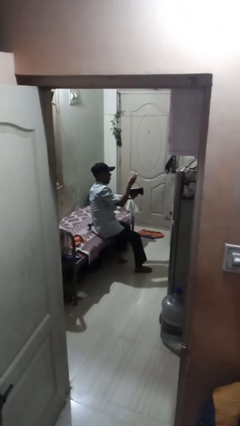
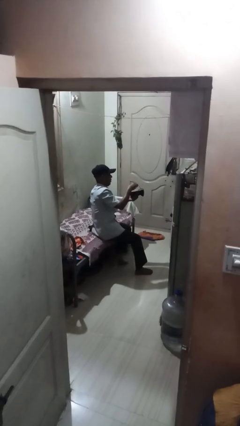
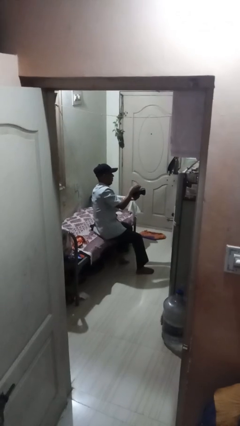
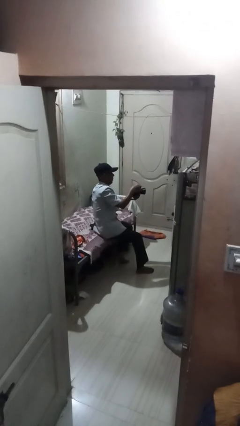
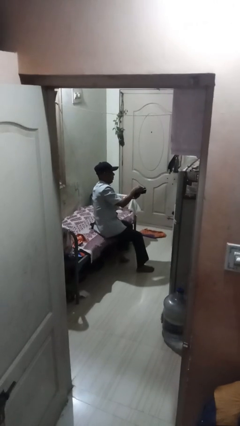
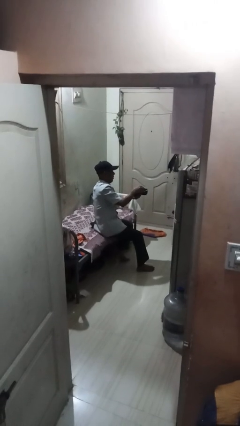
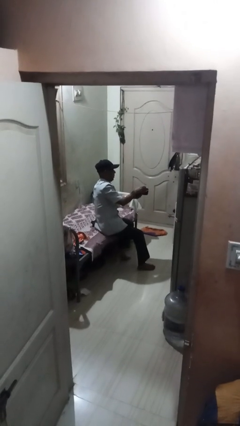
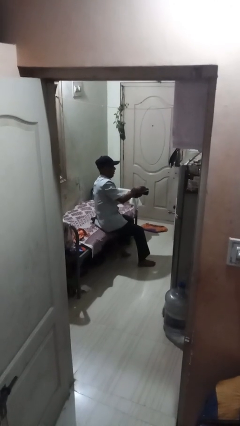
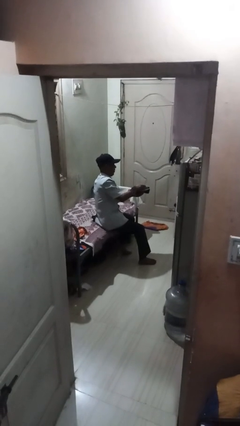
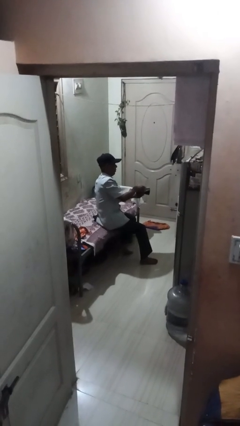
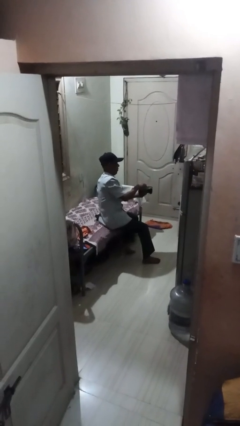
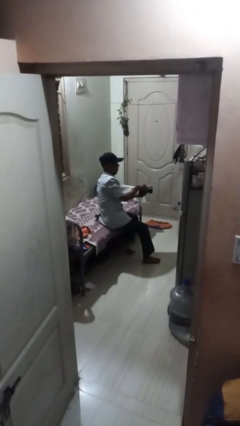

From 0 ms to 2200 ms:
person puts object into purse

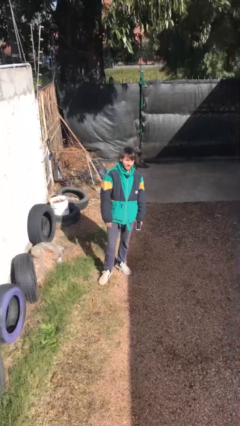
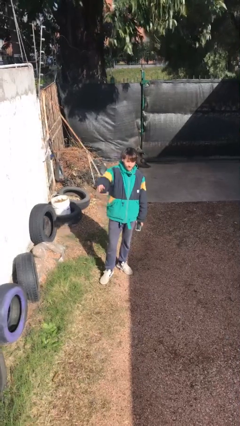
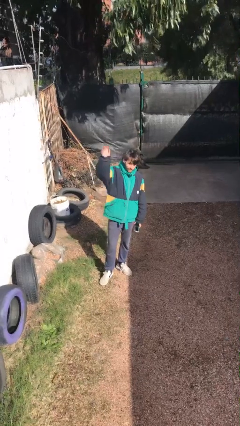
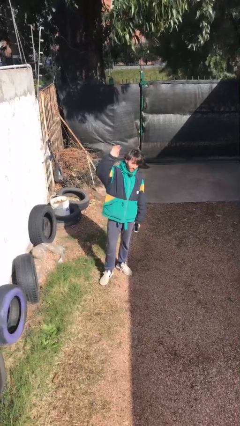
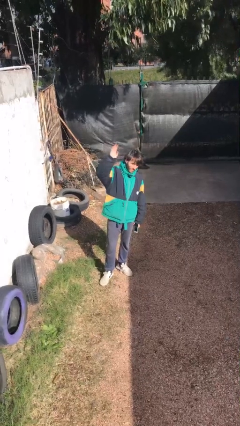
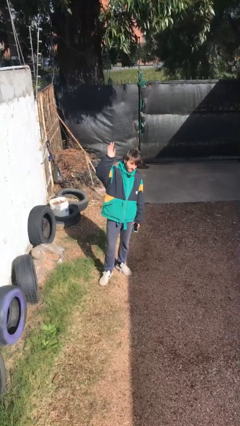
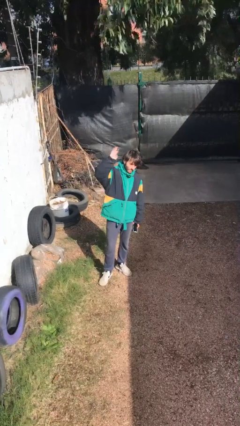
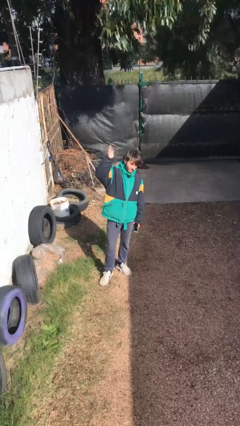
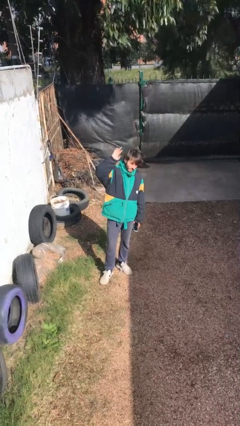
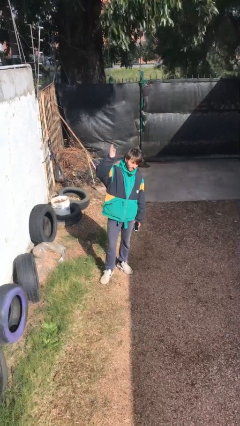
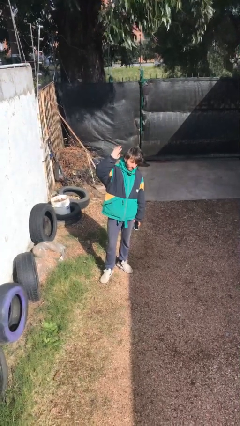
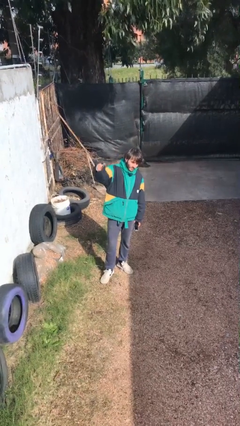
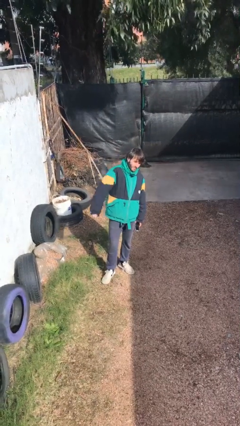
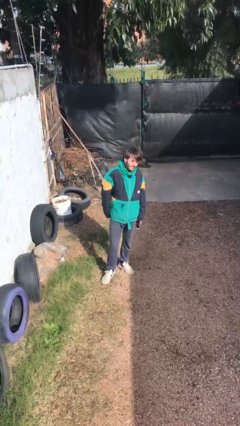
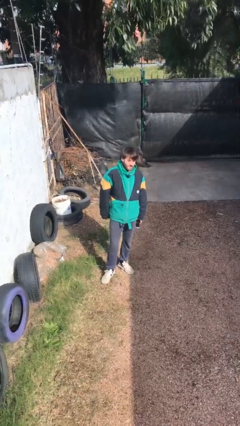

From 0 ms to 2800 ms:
person waves at person

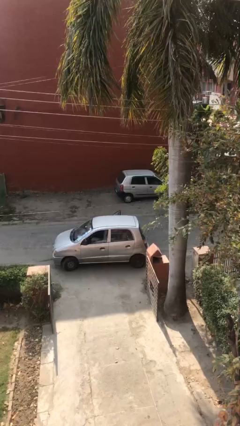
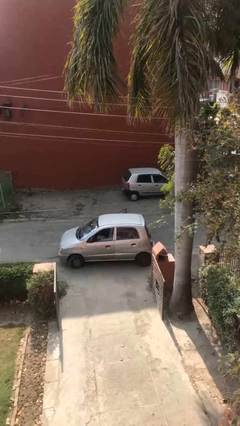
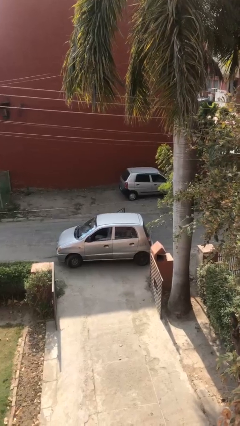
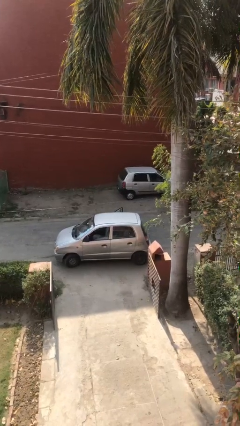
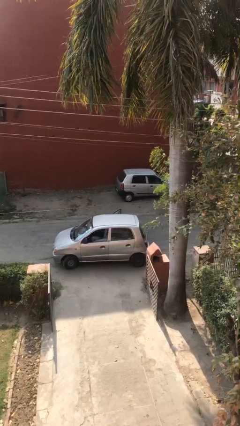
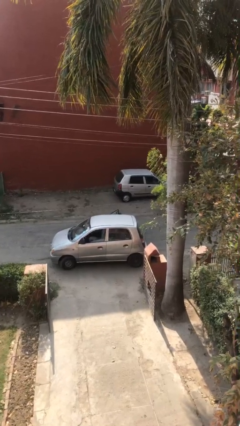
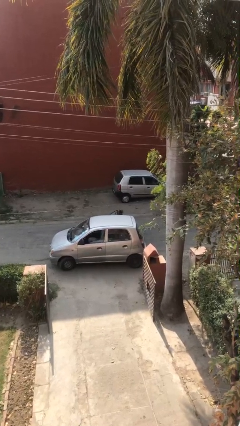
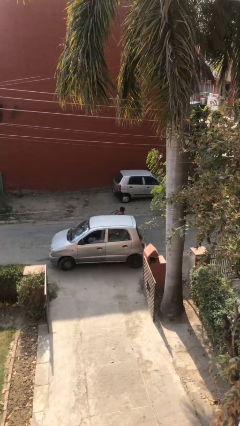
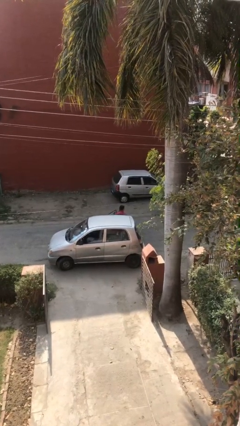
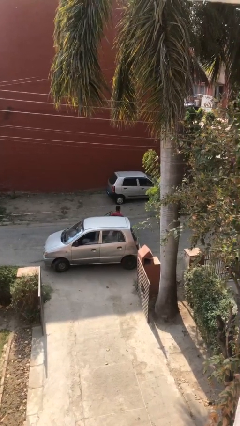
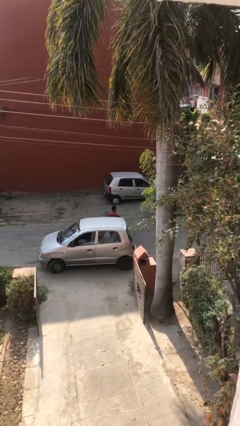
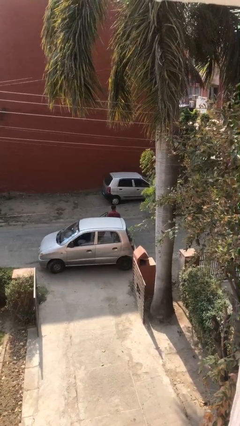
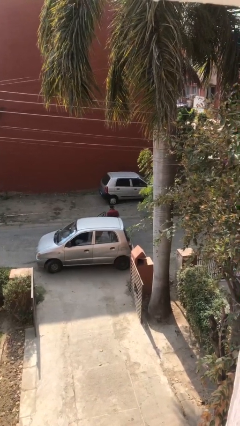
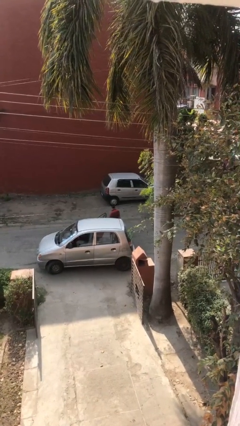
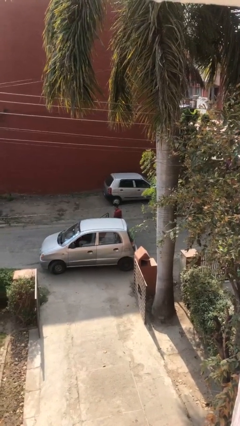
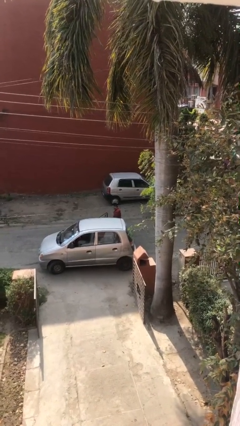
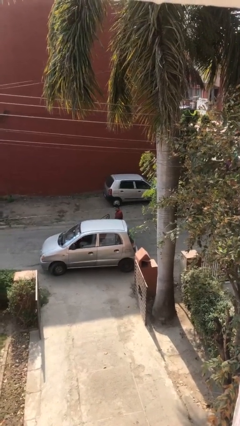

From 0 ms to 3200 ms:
person exits car

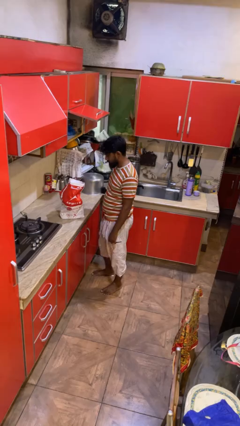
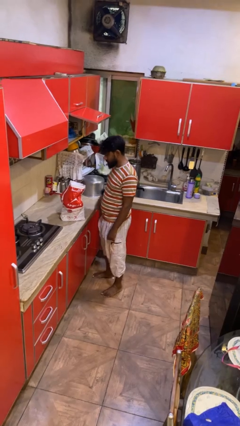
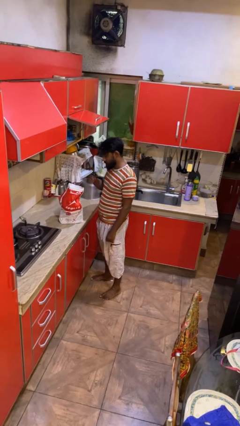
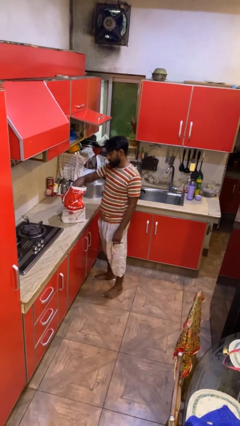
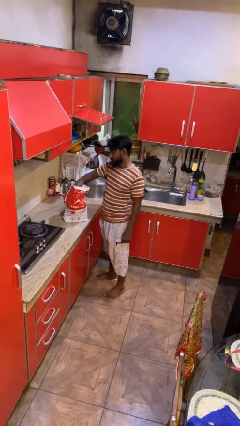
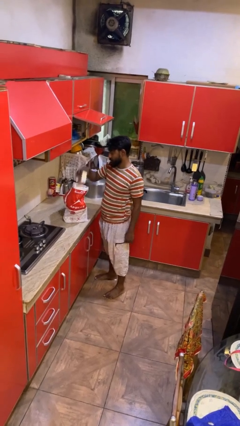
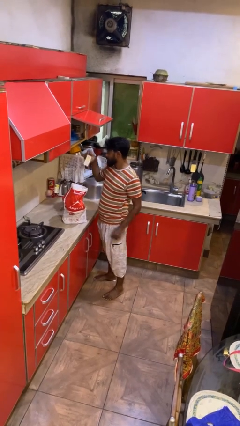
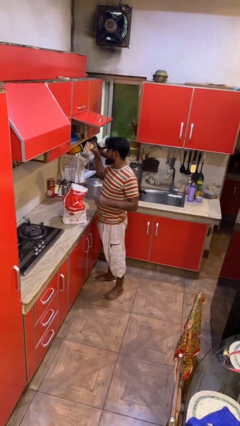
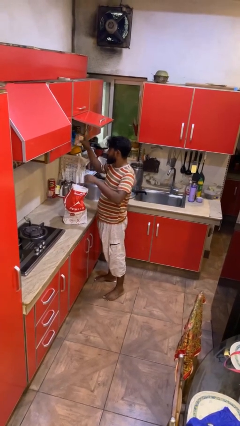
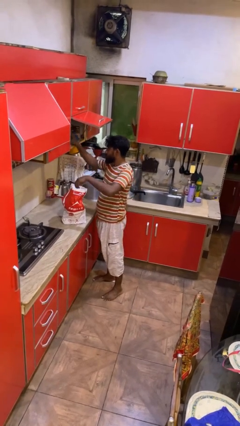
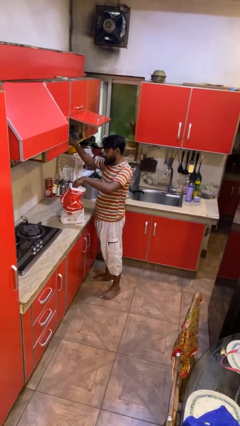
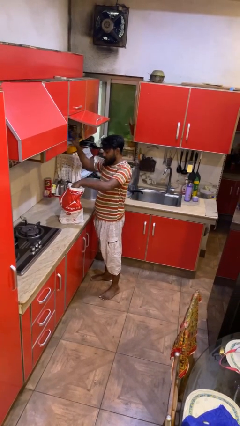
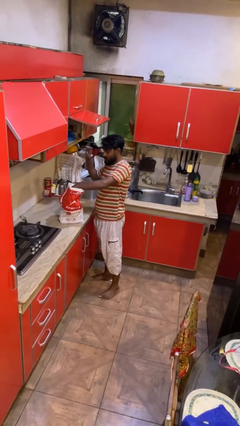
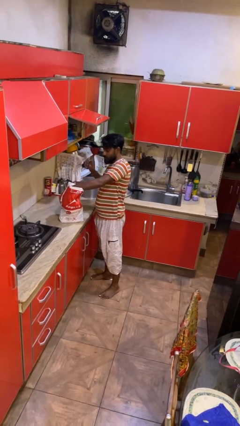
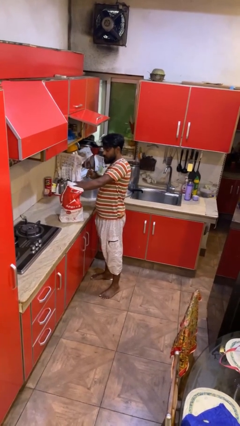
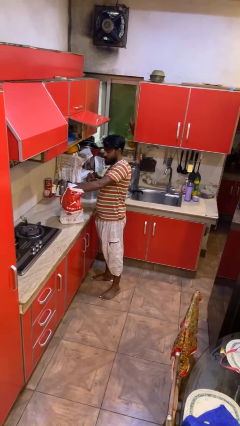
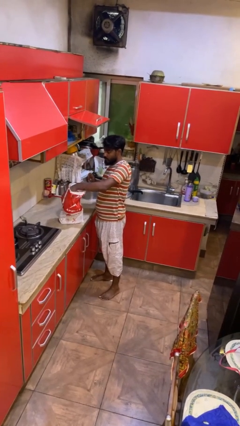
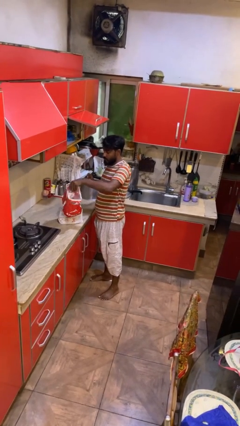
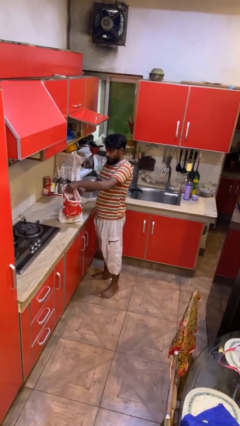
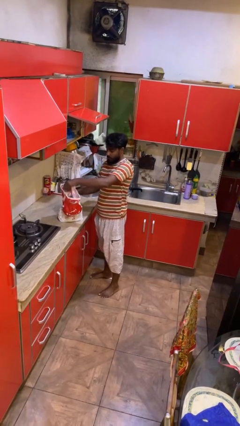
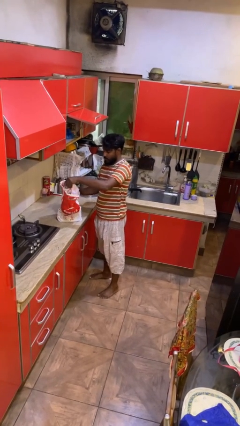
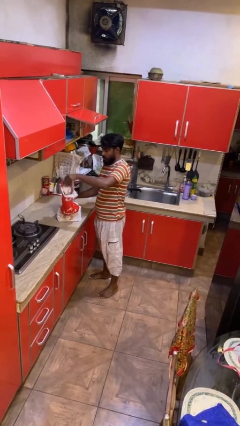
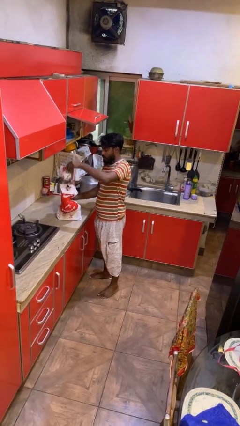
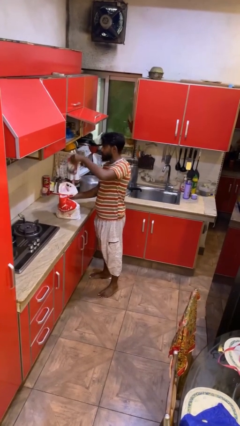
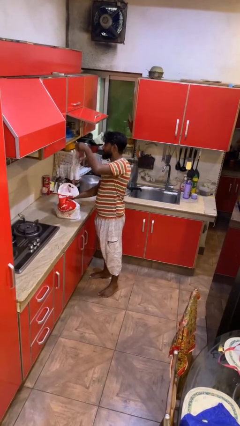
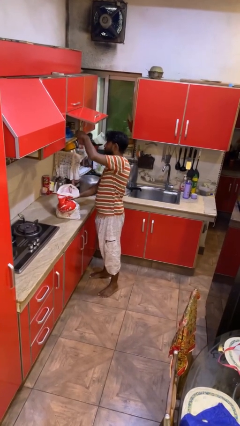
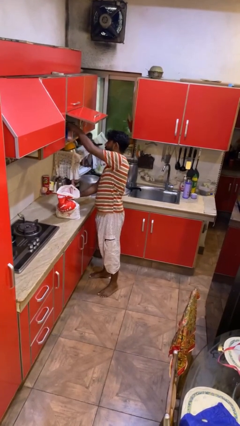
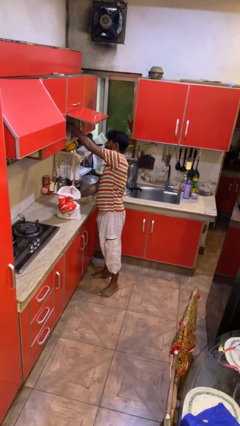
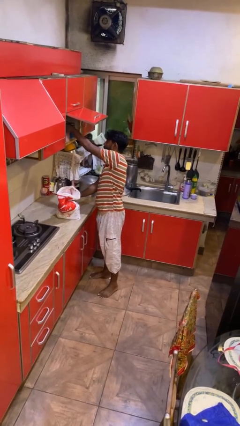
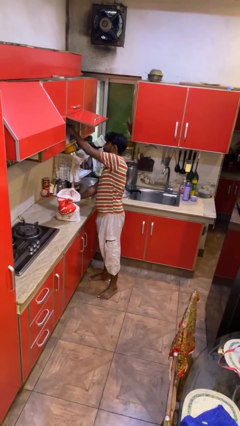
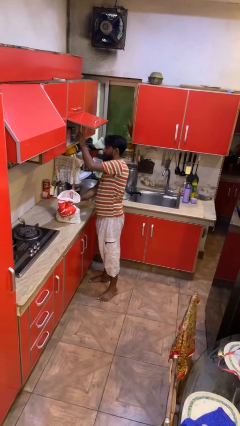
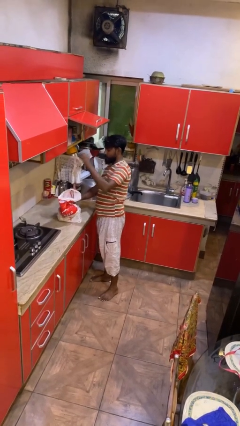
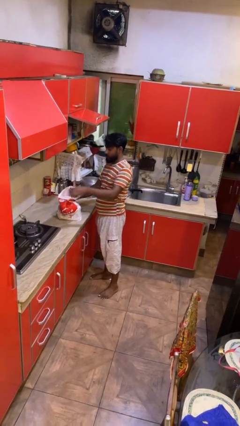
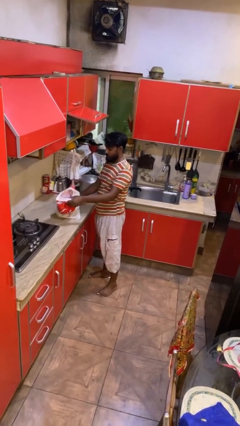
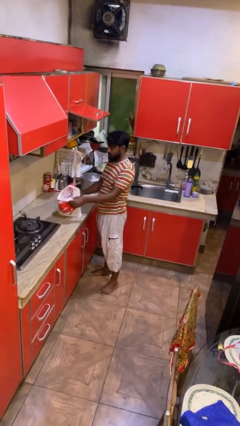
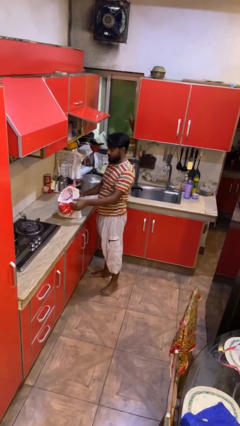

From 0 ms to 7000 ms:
person loads groceries into cabinet

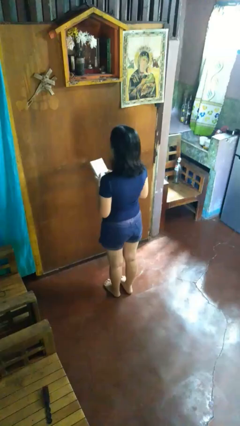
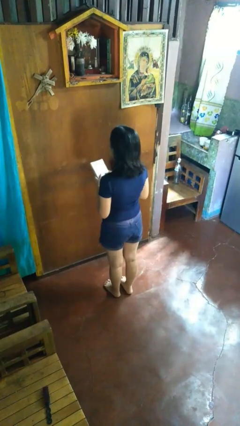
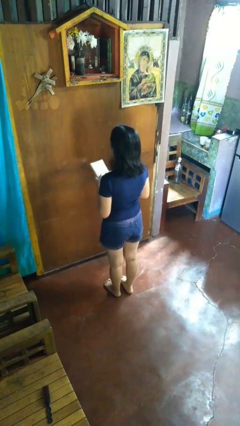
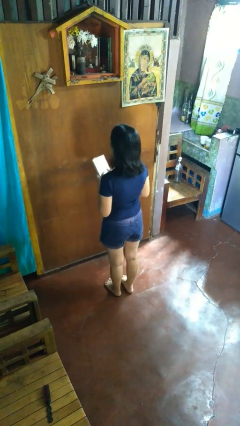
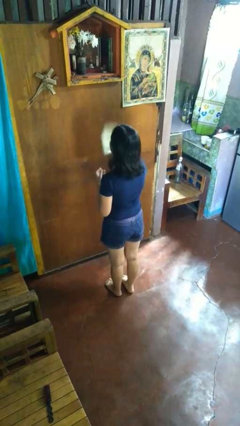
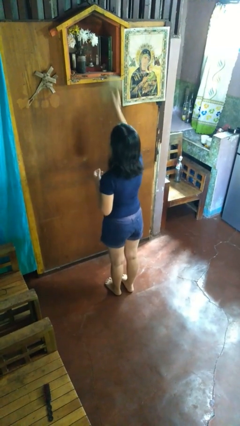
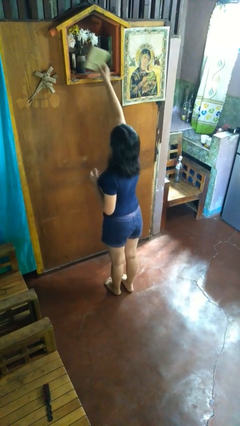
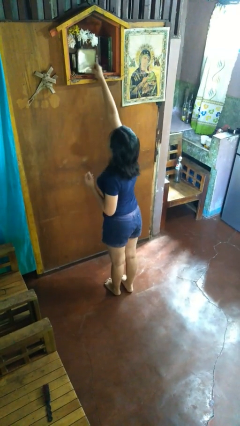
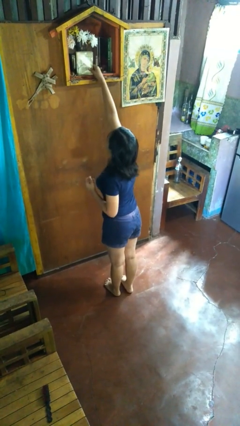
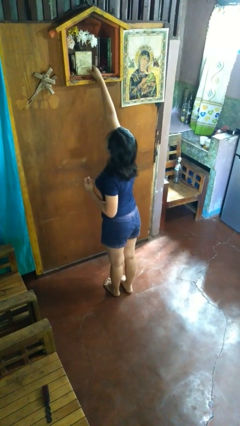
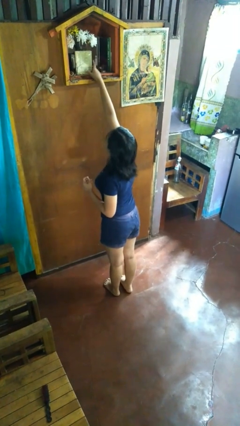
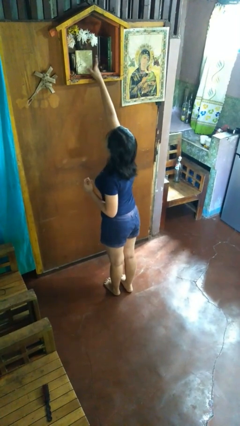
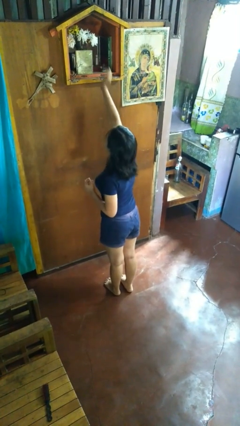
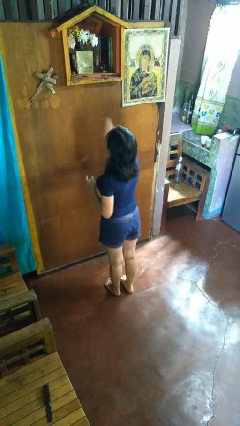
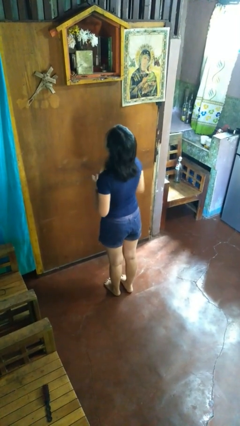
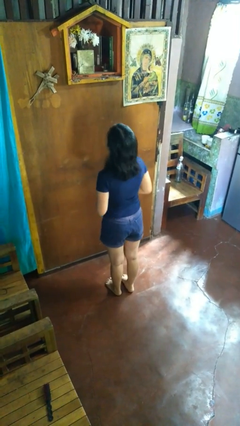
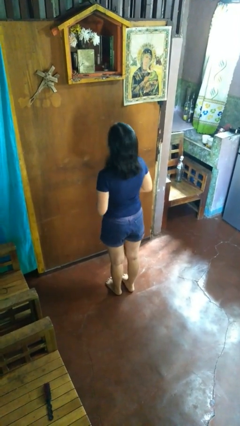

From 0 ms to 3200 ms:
person puts down object on shelf
